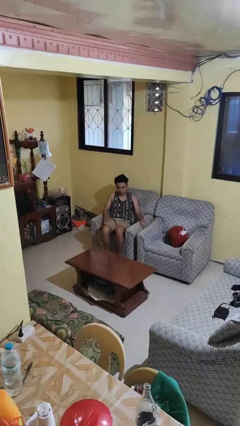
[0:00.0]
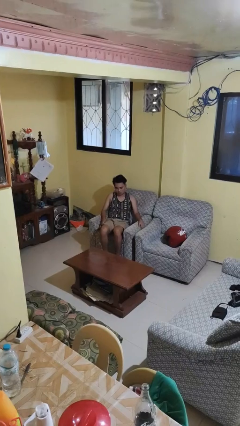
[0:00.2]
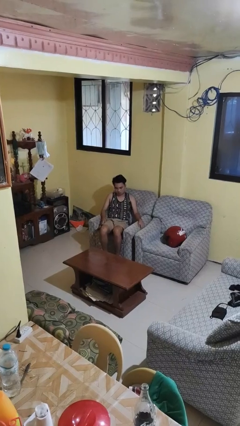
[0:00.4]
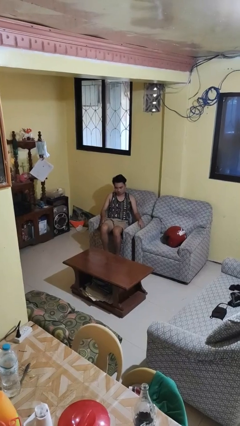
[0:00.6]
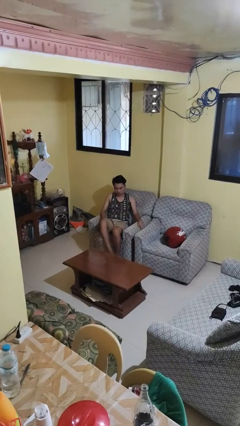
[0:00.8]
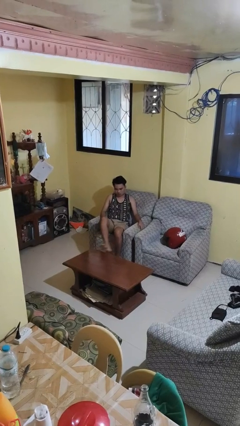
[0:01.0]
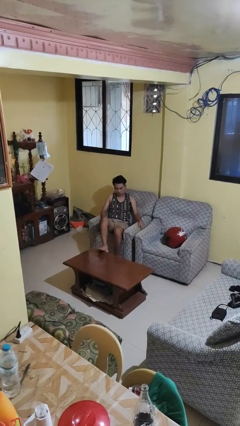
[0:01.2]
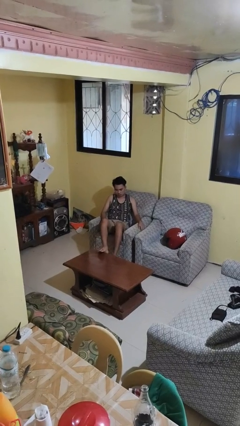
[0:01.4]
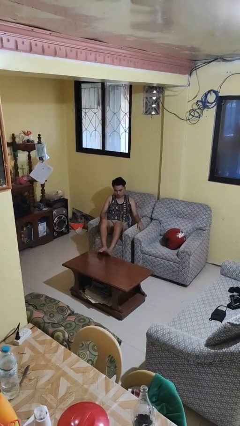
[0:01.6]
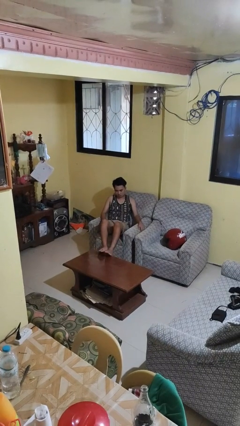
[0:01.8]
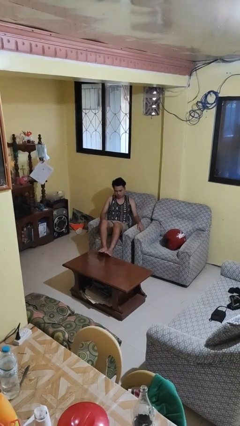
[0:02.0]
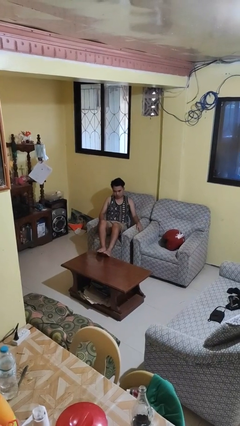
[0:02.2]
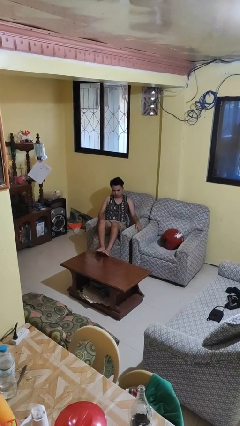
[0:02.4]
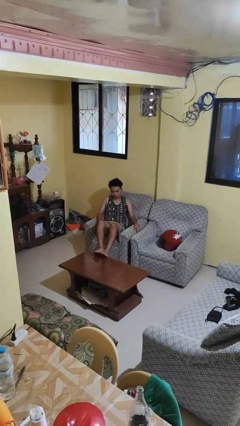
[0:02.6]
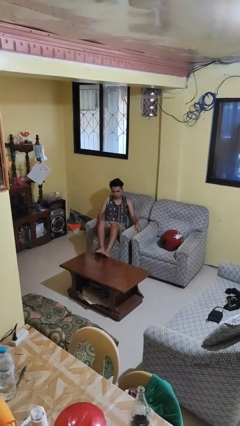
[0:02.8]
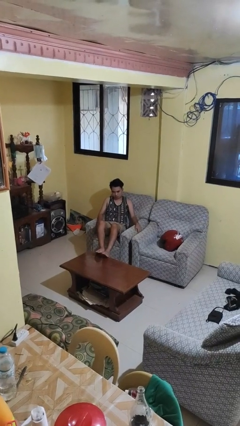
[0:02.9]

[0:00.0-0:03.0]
person puts feet up

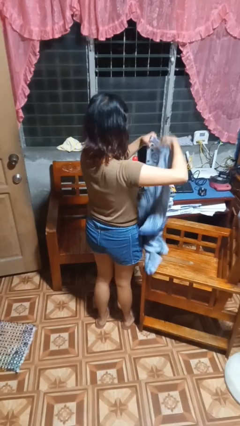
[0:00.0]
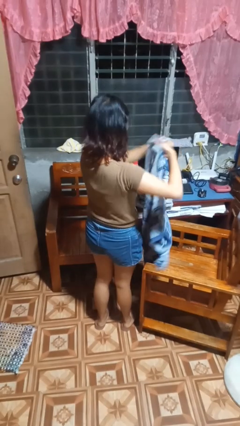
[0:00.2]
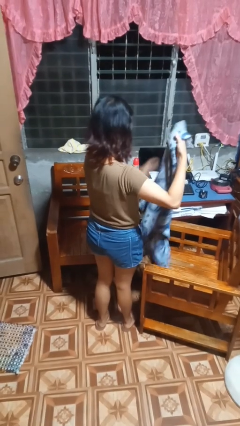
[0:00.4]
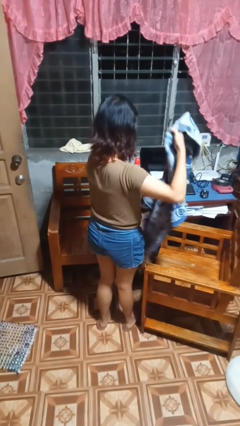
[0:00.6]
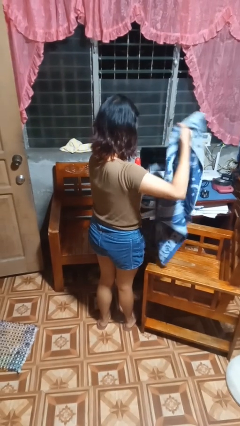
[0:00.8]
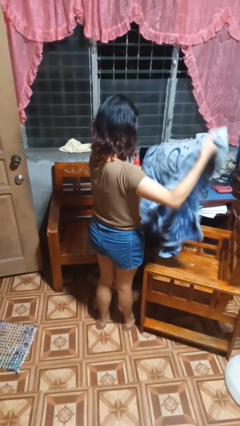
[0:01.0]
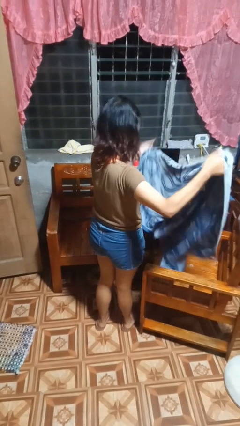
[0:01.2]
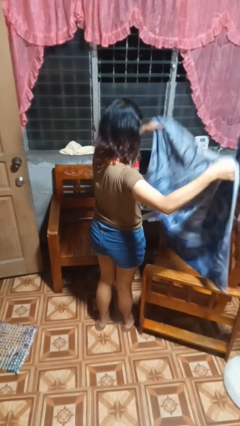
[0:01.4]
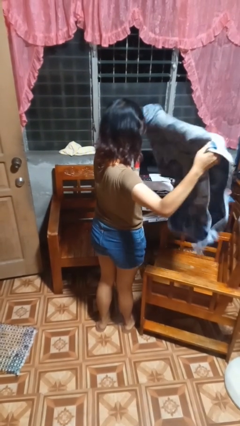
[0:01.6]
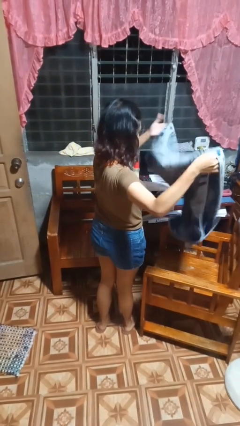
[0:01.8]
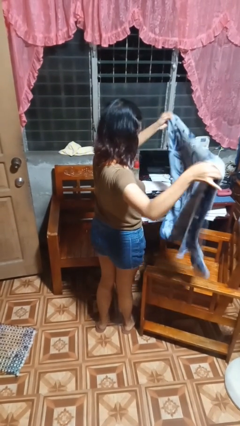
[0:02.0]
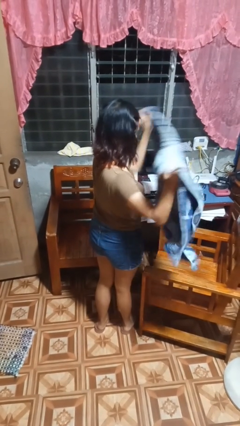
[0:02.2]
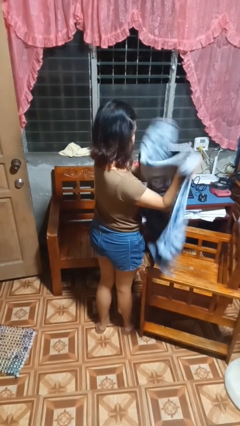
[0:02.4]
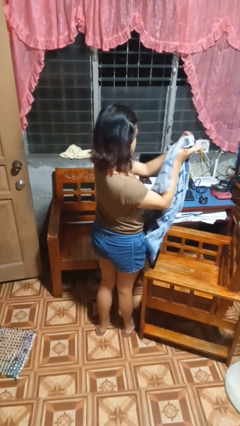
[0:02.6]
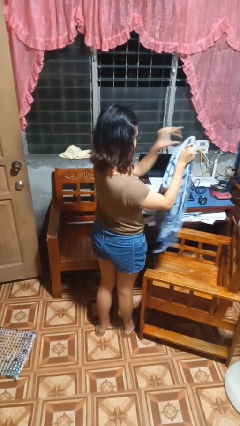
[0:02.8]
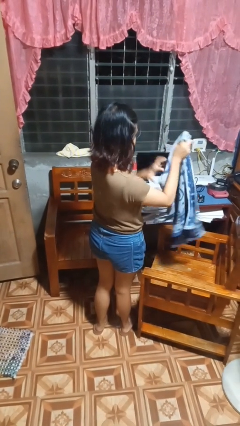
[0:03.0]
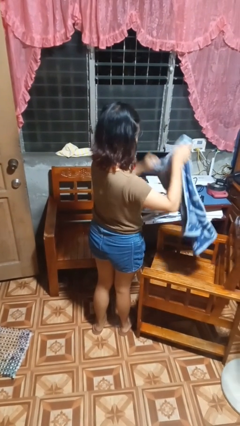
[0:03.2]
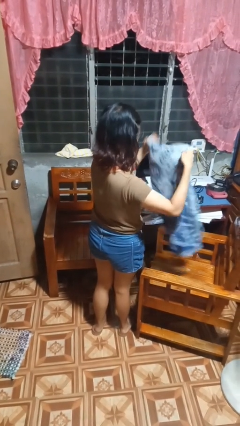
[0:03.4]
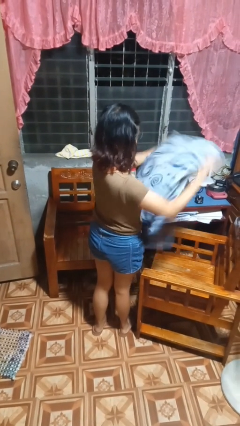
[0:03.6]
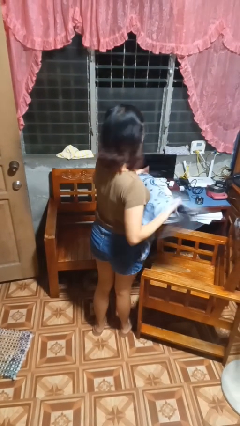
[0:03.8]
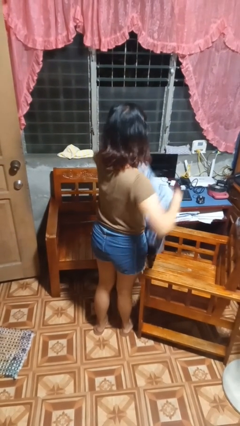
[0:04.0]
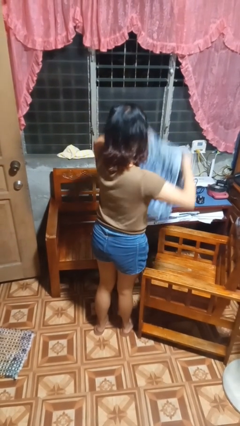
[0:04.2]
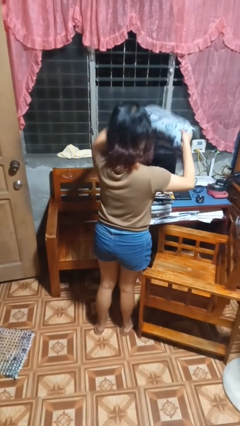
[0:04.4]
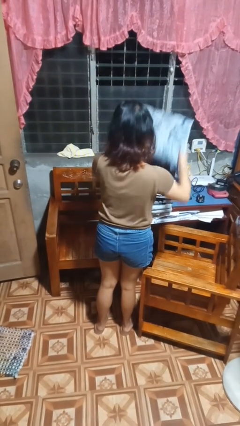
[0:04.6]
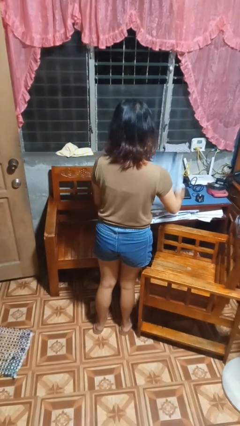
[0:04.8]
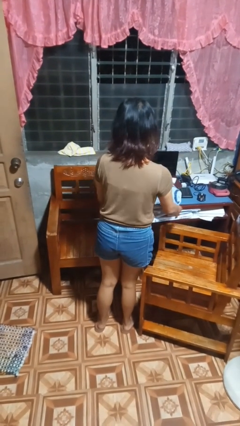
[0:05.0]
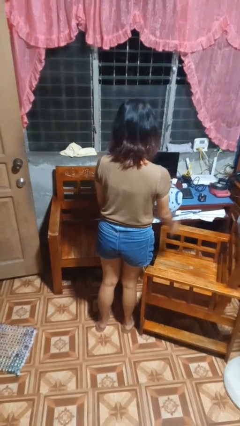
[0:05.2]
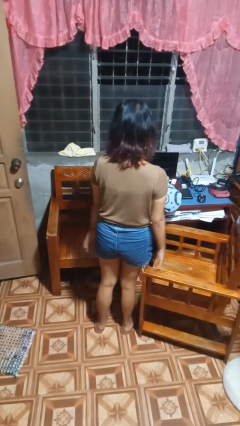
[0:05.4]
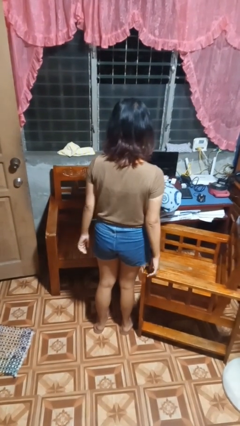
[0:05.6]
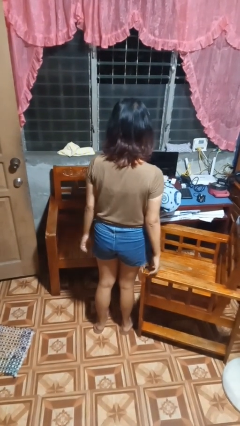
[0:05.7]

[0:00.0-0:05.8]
person folds towel

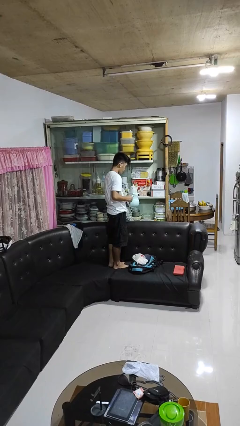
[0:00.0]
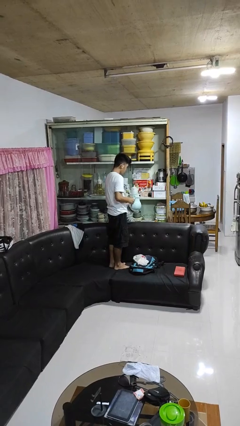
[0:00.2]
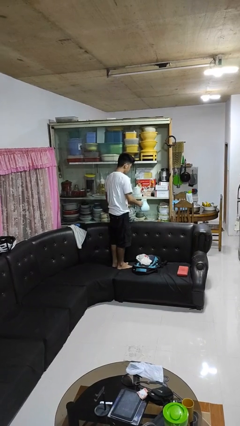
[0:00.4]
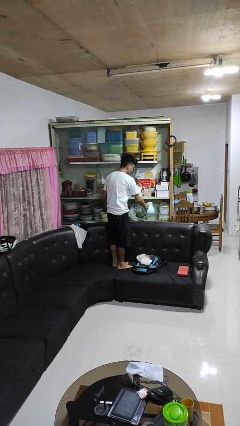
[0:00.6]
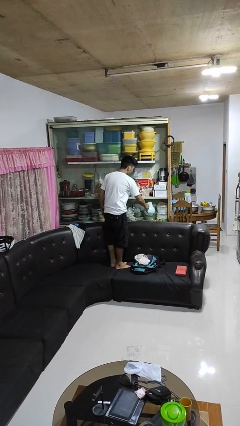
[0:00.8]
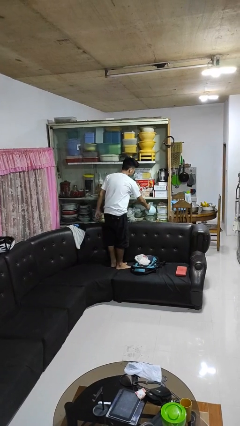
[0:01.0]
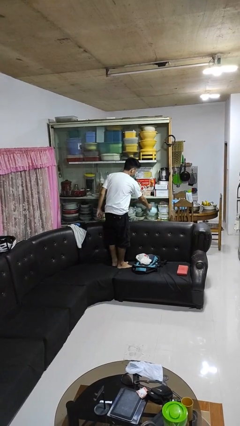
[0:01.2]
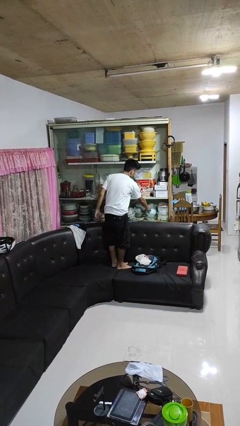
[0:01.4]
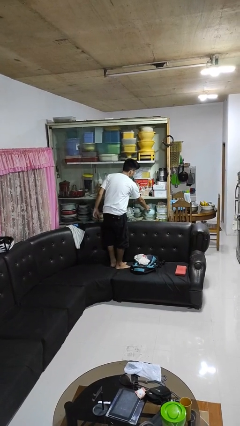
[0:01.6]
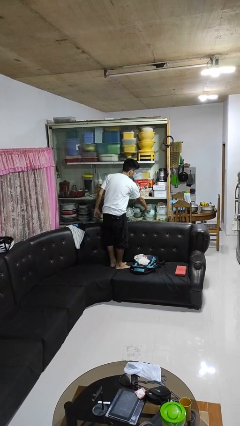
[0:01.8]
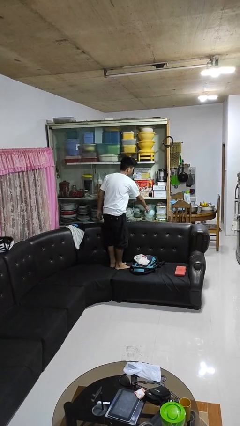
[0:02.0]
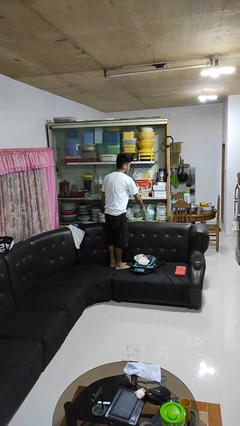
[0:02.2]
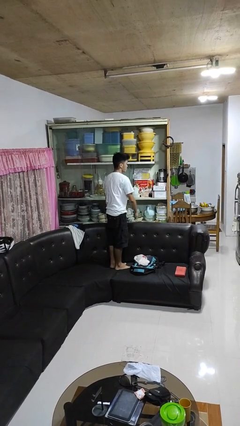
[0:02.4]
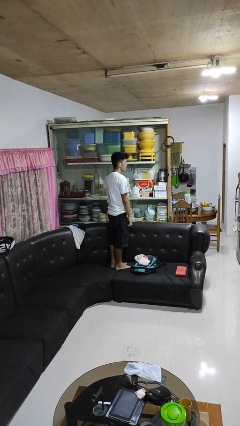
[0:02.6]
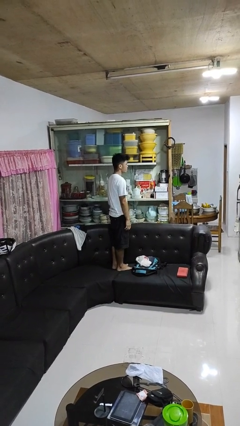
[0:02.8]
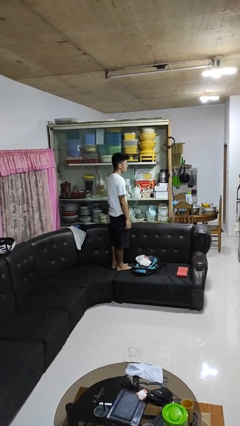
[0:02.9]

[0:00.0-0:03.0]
person puts down object into cabinet

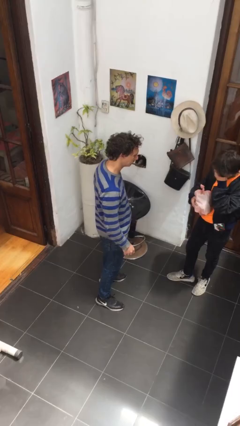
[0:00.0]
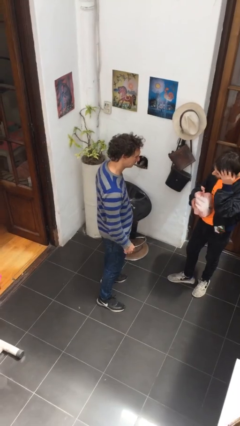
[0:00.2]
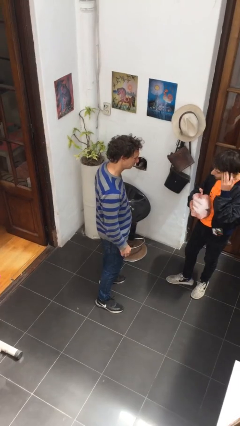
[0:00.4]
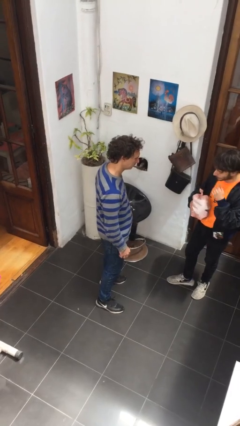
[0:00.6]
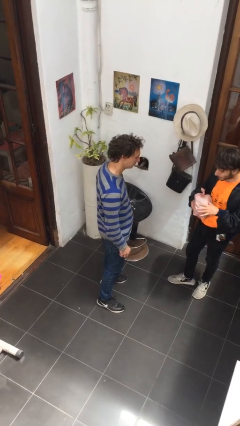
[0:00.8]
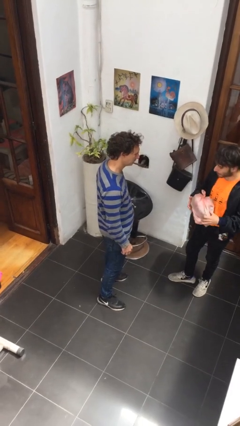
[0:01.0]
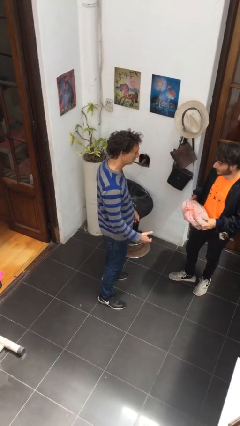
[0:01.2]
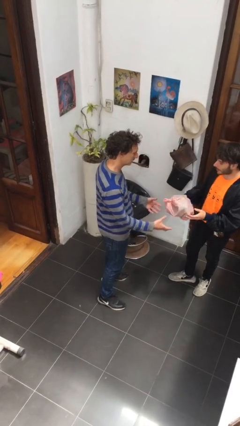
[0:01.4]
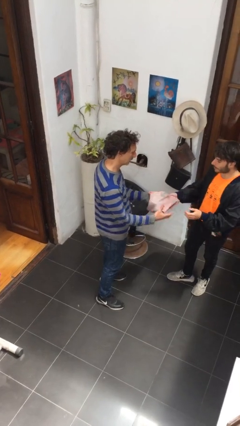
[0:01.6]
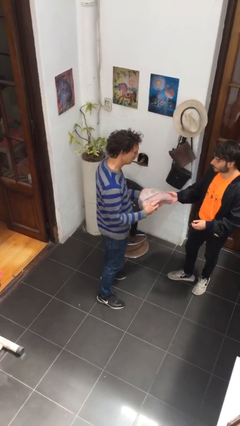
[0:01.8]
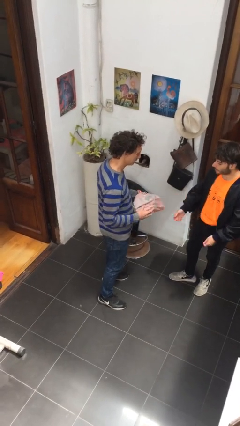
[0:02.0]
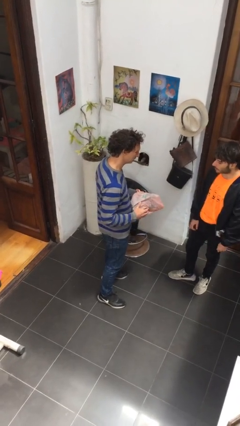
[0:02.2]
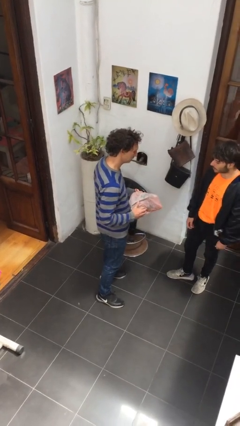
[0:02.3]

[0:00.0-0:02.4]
person transfers object to person

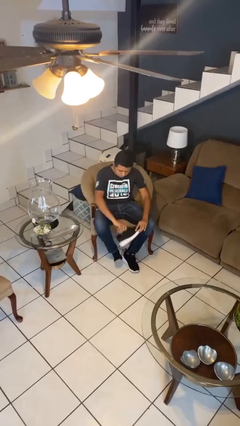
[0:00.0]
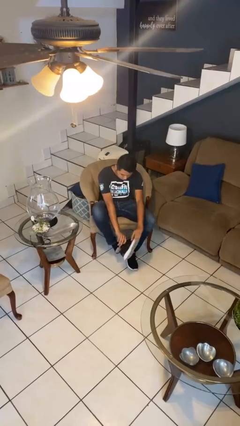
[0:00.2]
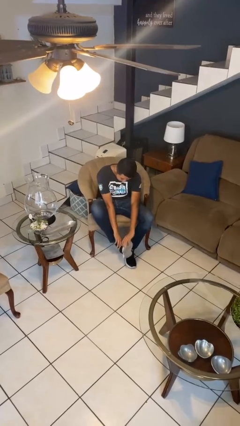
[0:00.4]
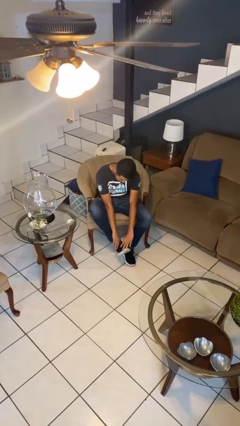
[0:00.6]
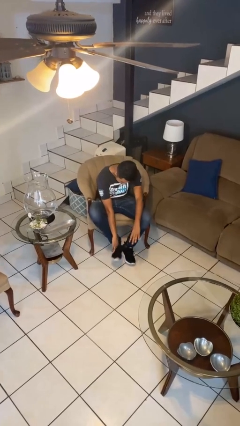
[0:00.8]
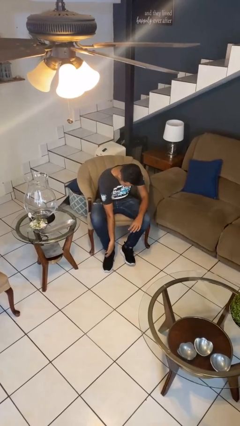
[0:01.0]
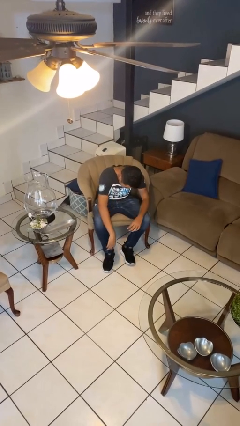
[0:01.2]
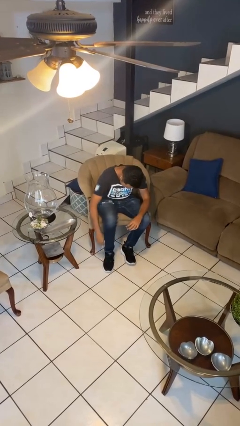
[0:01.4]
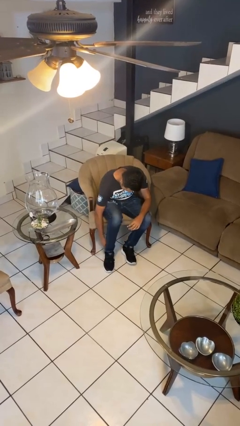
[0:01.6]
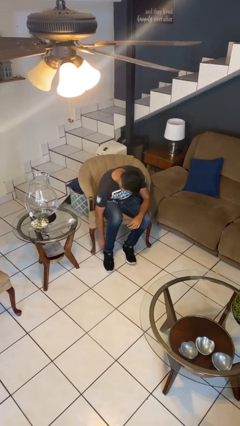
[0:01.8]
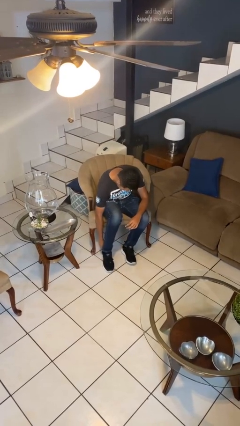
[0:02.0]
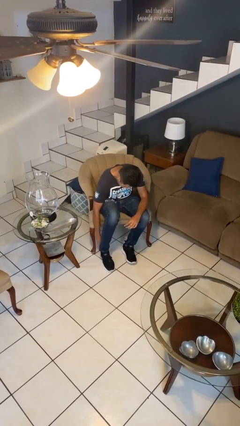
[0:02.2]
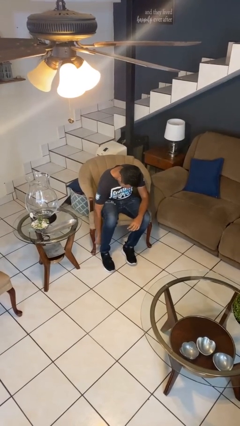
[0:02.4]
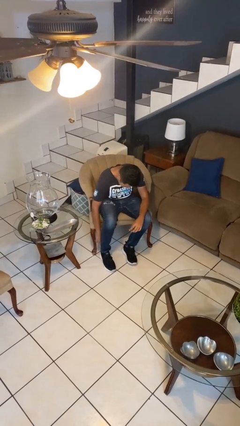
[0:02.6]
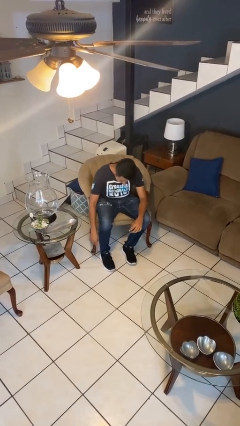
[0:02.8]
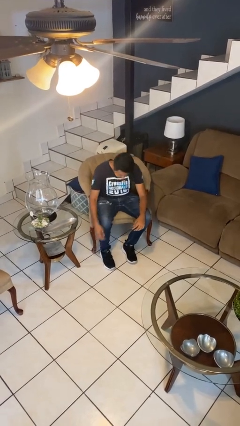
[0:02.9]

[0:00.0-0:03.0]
person puts on headphones
